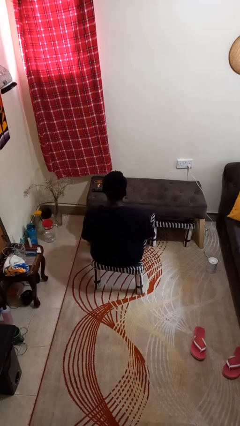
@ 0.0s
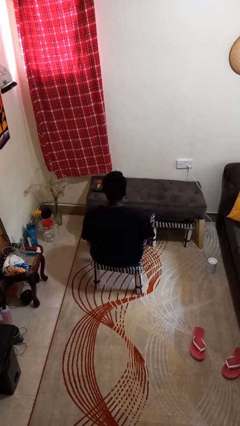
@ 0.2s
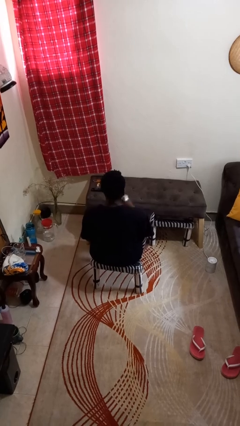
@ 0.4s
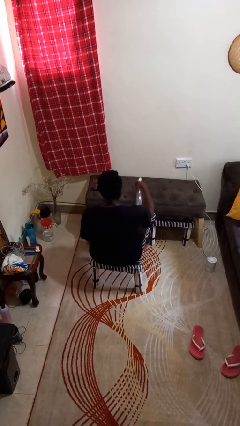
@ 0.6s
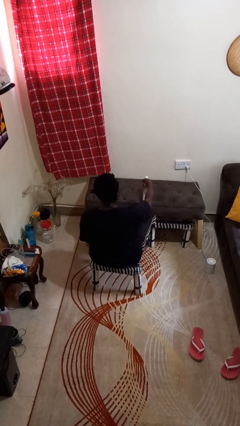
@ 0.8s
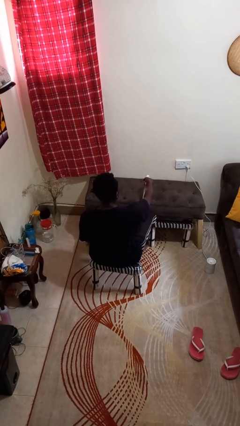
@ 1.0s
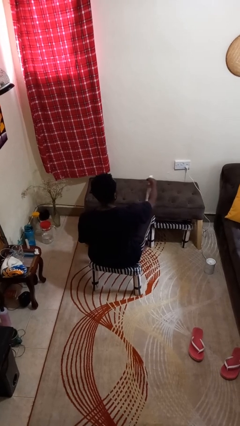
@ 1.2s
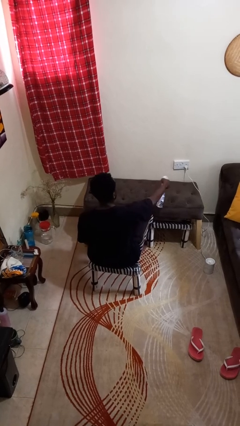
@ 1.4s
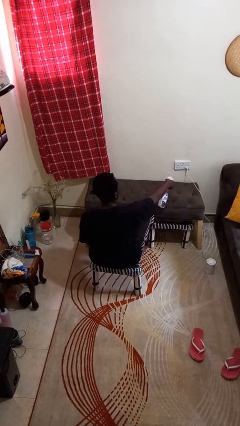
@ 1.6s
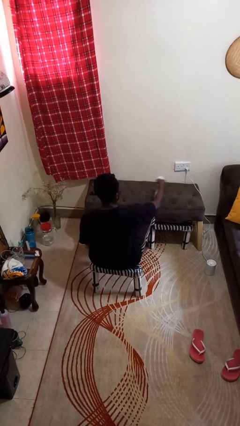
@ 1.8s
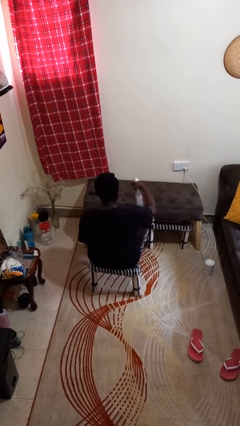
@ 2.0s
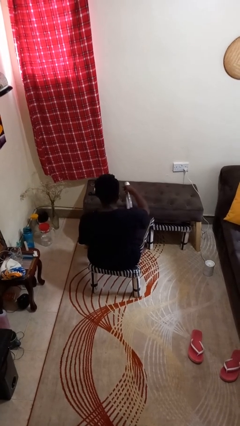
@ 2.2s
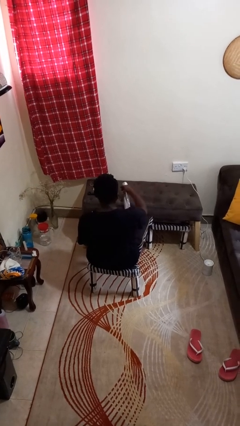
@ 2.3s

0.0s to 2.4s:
person sprays from bottle

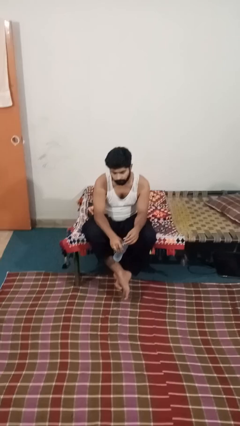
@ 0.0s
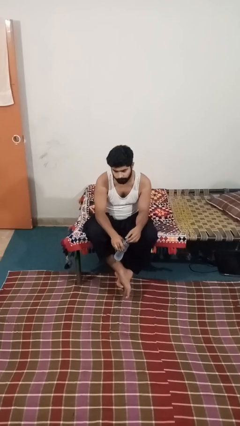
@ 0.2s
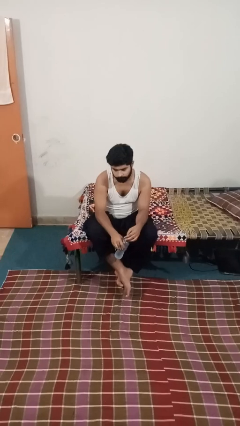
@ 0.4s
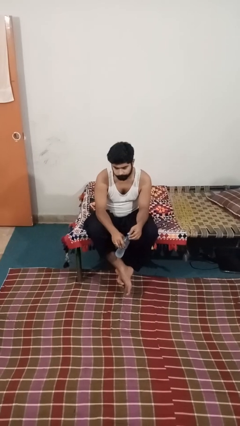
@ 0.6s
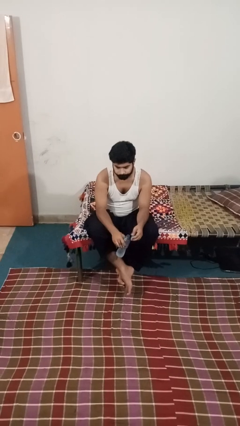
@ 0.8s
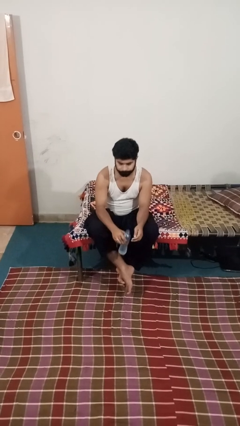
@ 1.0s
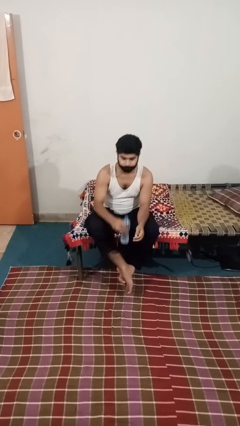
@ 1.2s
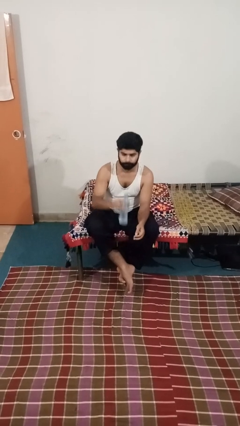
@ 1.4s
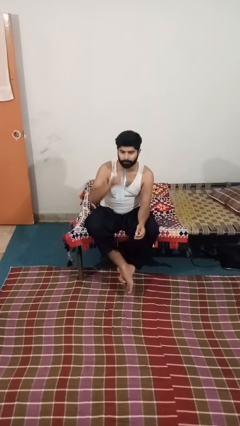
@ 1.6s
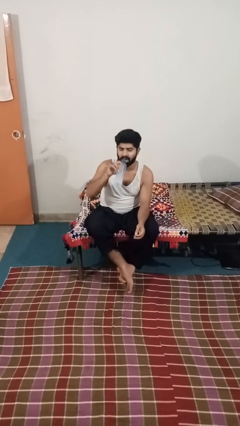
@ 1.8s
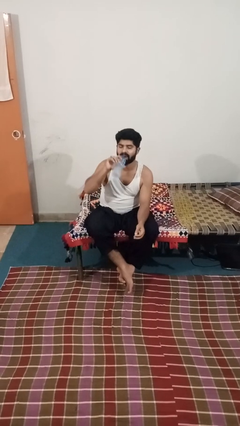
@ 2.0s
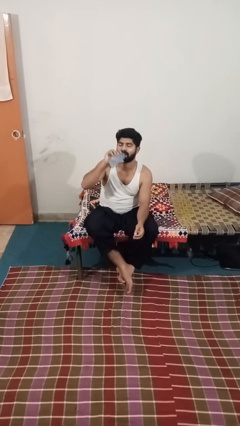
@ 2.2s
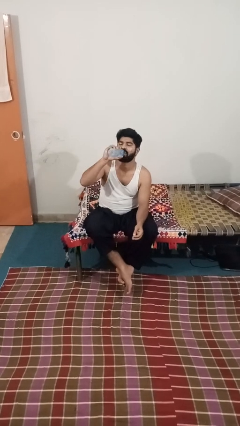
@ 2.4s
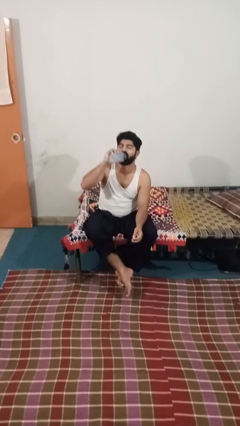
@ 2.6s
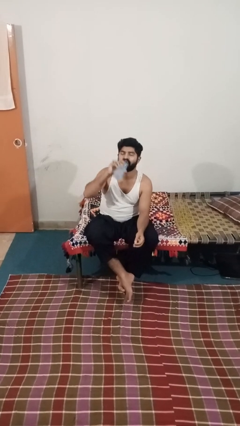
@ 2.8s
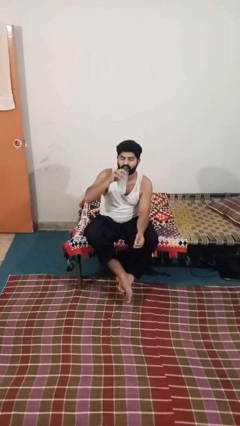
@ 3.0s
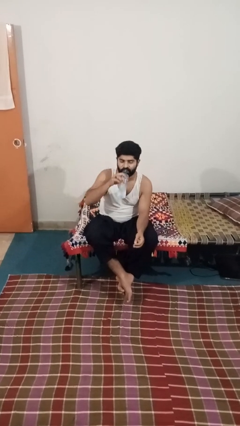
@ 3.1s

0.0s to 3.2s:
person drinks from bottle

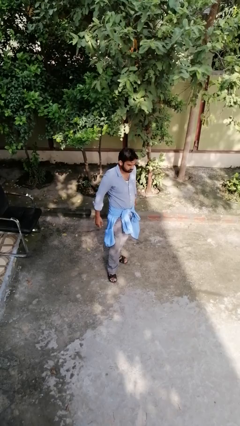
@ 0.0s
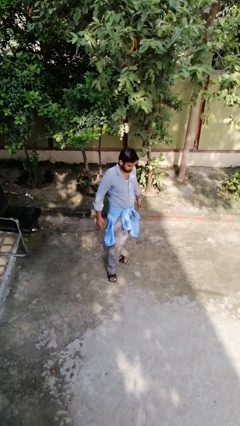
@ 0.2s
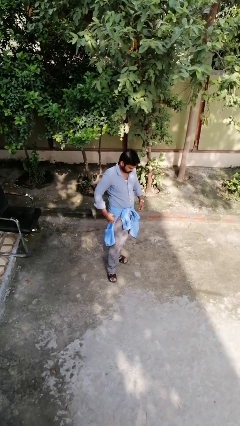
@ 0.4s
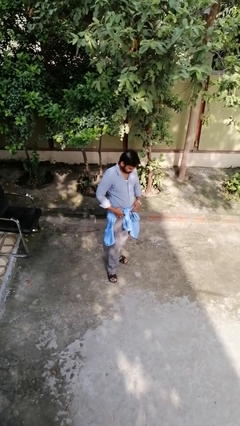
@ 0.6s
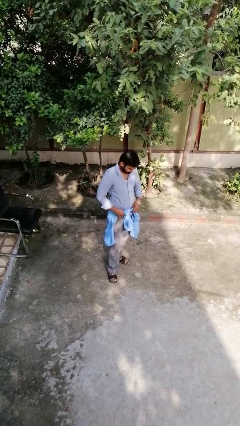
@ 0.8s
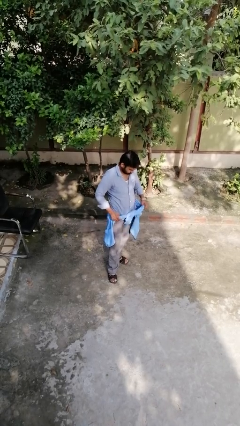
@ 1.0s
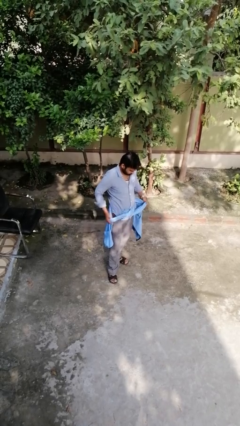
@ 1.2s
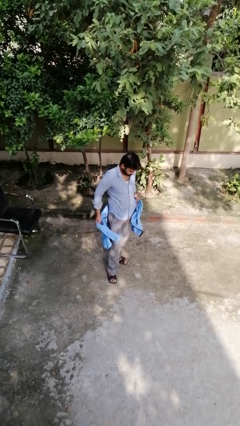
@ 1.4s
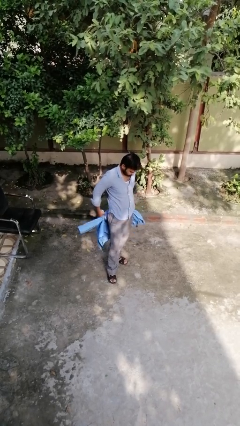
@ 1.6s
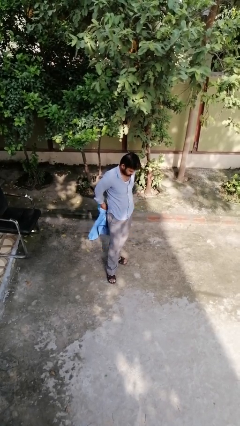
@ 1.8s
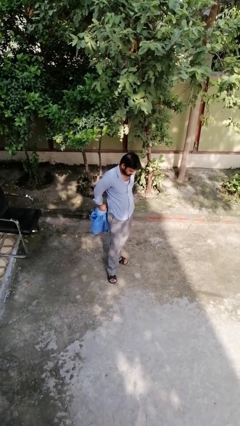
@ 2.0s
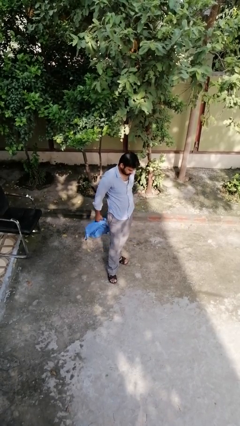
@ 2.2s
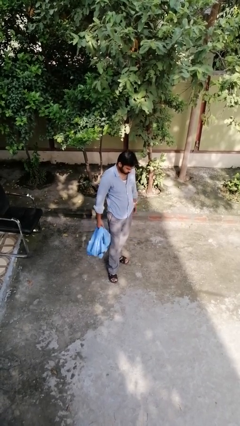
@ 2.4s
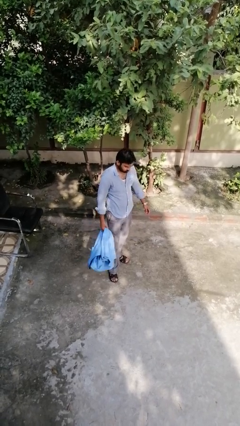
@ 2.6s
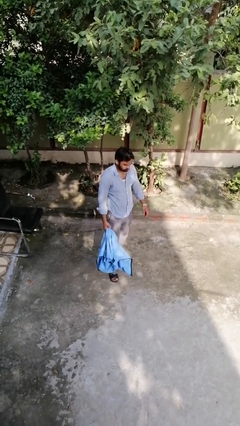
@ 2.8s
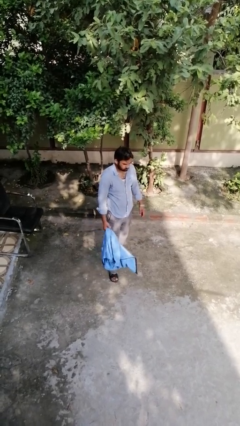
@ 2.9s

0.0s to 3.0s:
person unties jacket around waist

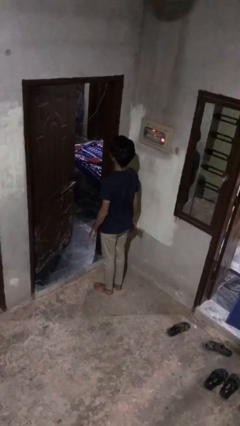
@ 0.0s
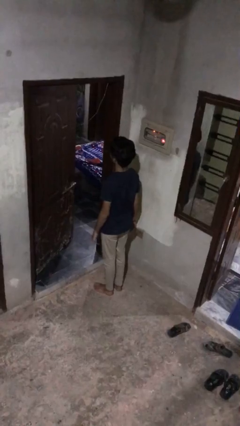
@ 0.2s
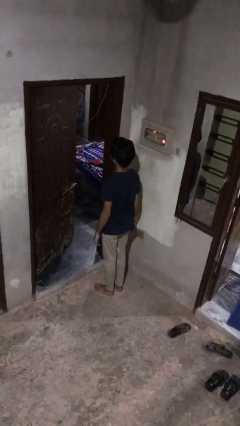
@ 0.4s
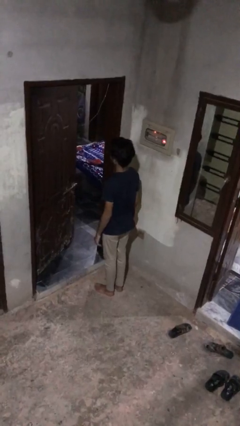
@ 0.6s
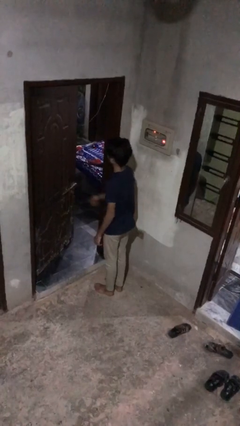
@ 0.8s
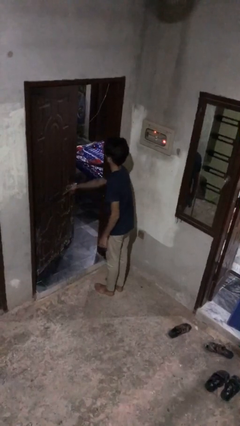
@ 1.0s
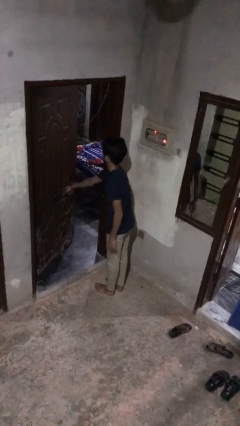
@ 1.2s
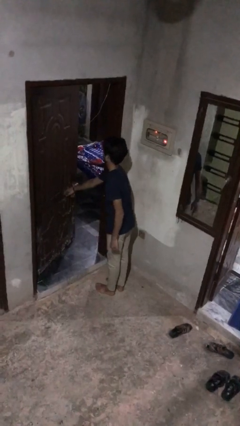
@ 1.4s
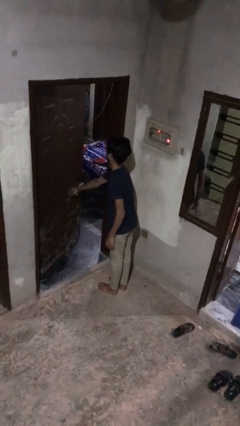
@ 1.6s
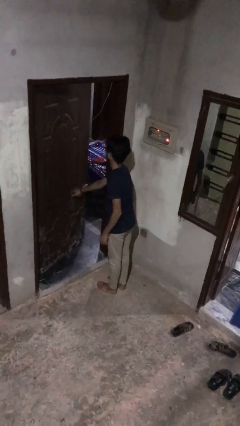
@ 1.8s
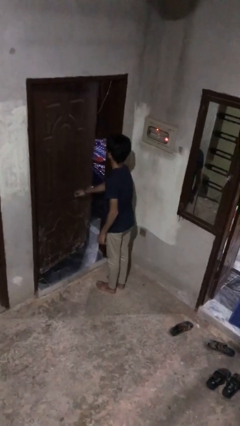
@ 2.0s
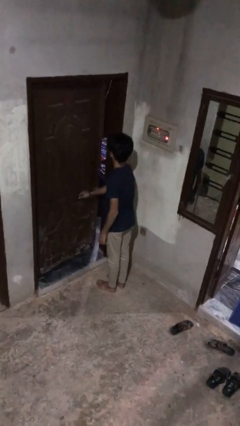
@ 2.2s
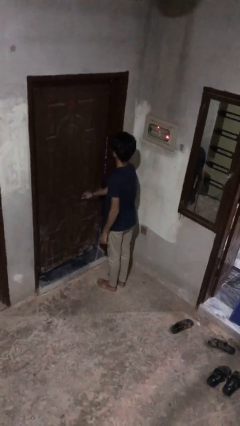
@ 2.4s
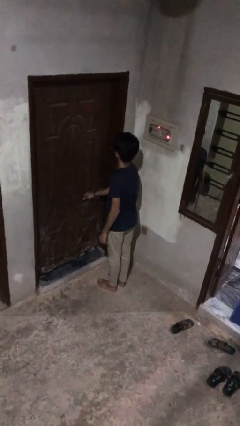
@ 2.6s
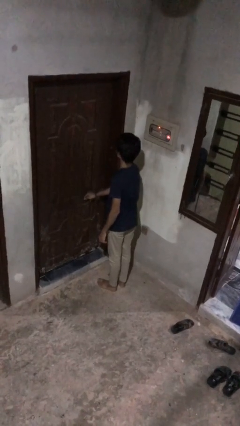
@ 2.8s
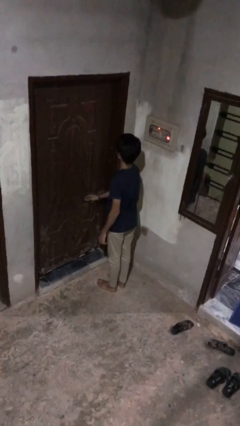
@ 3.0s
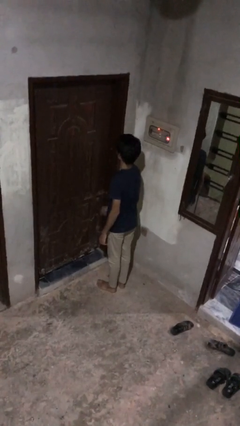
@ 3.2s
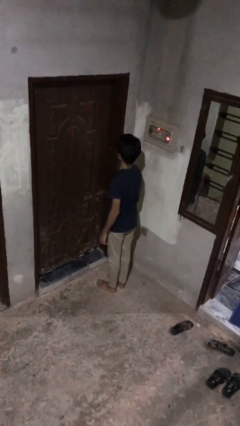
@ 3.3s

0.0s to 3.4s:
person closes facility door

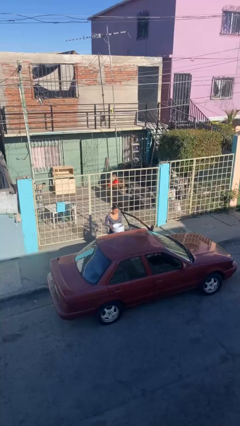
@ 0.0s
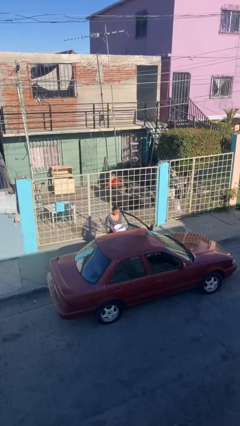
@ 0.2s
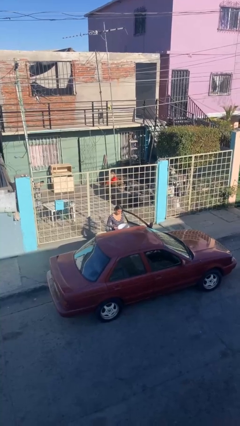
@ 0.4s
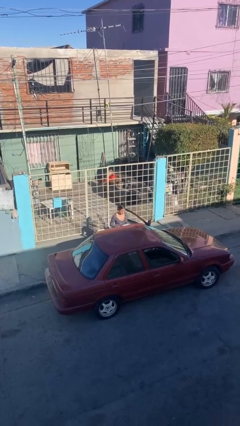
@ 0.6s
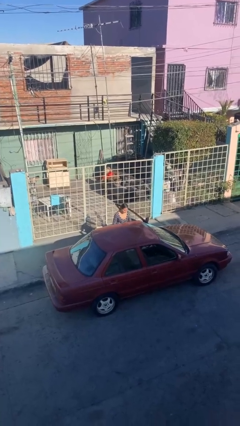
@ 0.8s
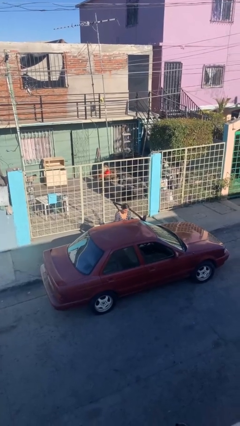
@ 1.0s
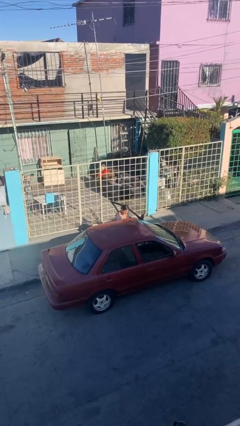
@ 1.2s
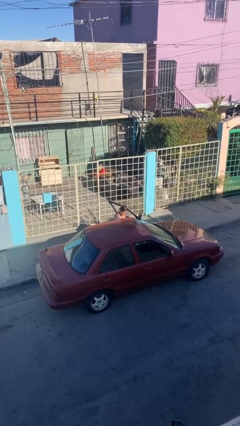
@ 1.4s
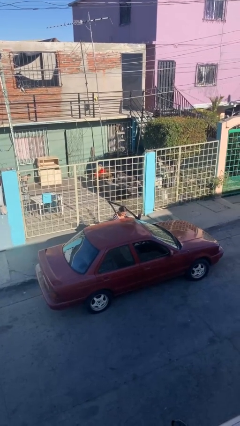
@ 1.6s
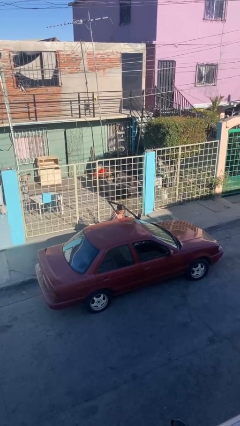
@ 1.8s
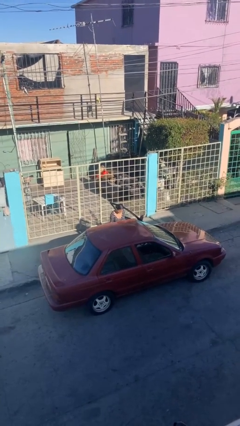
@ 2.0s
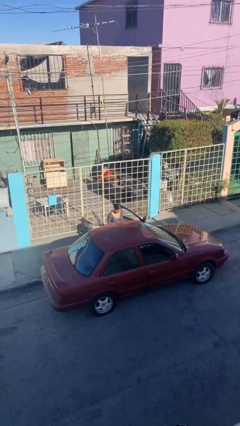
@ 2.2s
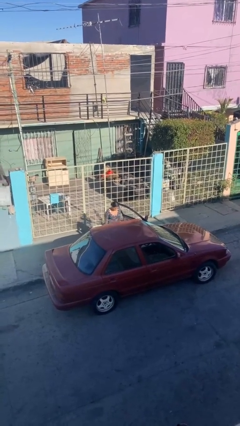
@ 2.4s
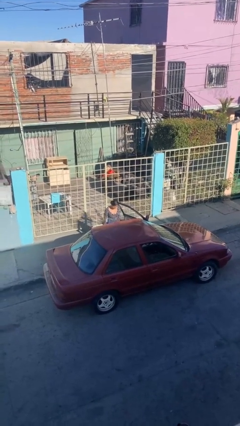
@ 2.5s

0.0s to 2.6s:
person loads car

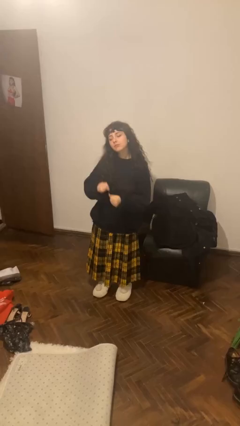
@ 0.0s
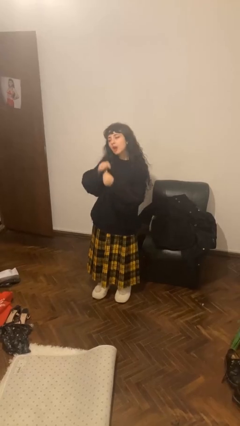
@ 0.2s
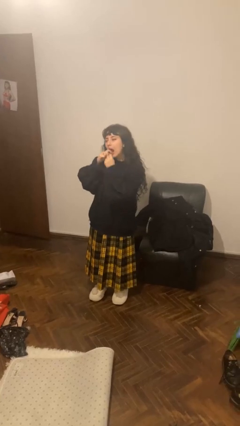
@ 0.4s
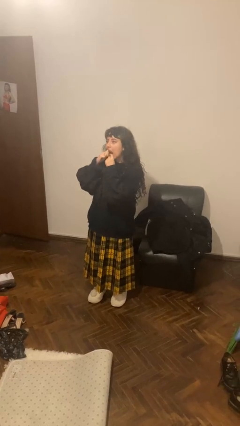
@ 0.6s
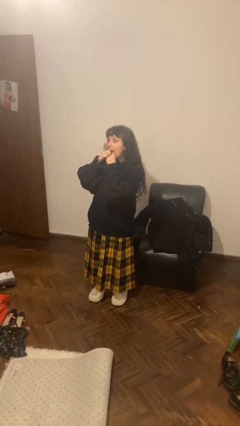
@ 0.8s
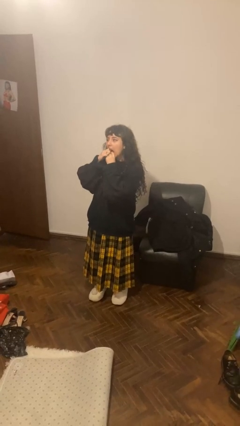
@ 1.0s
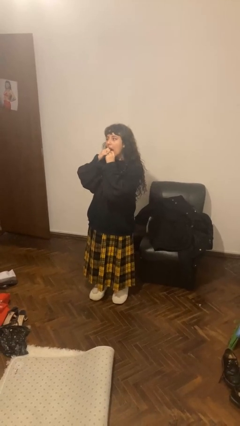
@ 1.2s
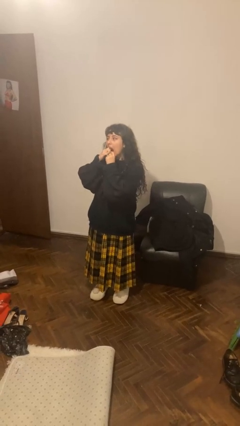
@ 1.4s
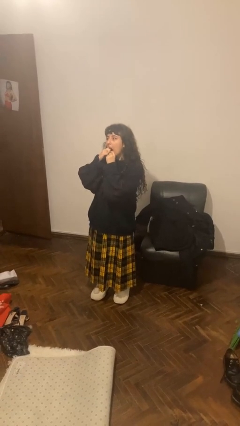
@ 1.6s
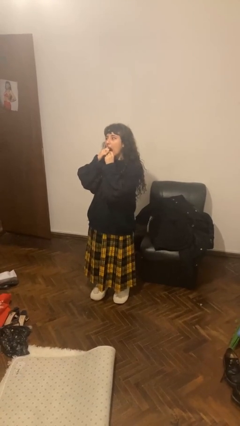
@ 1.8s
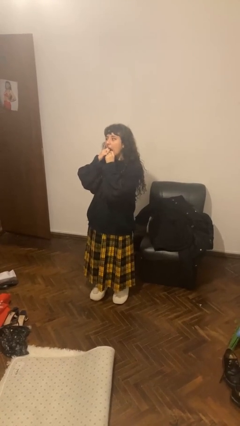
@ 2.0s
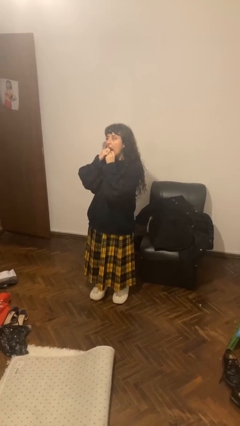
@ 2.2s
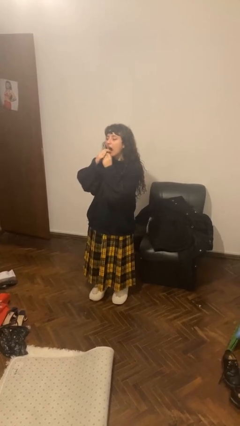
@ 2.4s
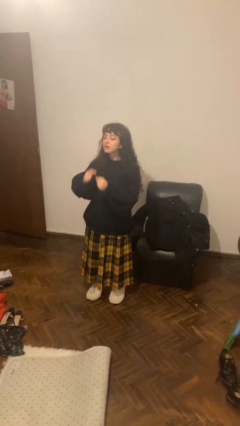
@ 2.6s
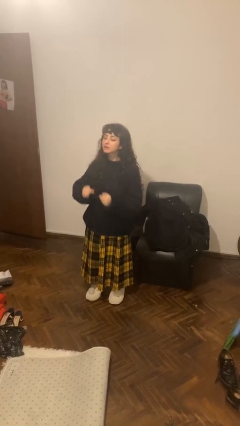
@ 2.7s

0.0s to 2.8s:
person flosses
